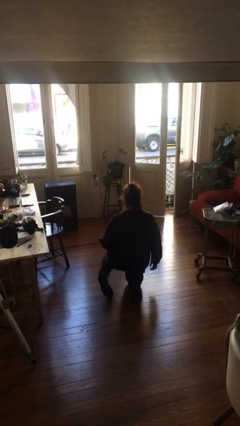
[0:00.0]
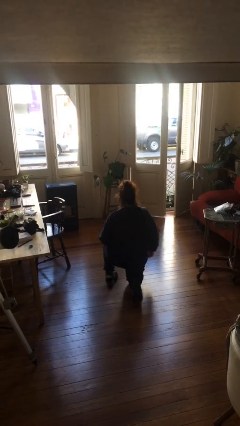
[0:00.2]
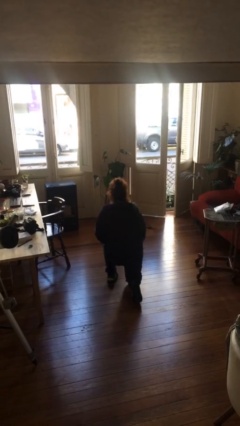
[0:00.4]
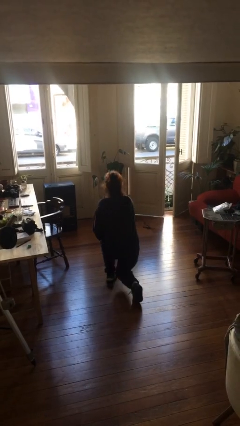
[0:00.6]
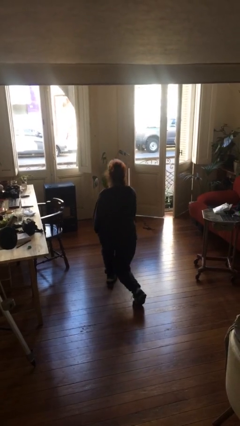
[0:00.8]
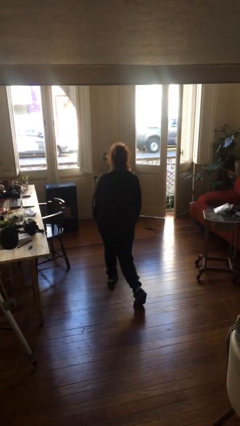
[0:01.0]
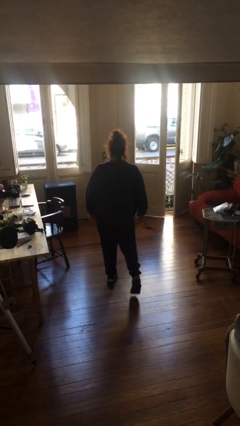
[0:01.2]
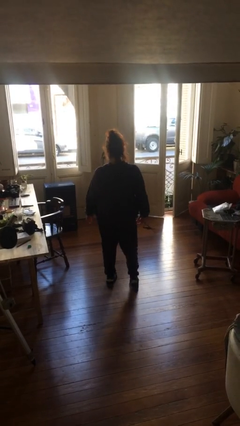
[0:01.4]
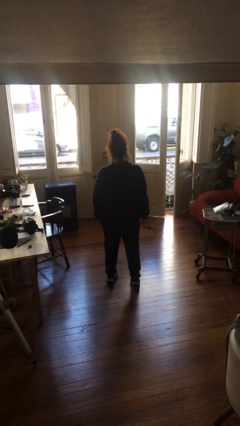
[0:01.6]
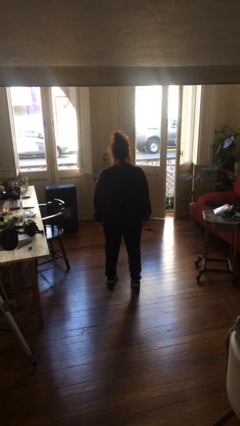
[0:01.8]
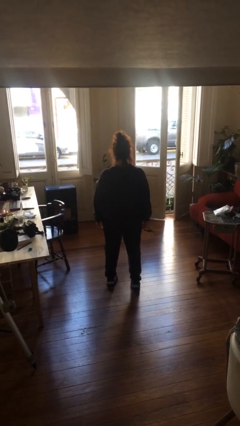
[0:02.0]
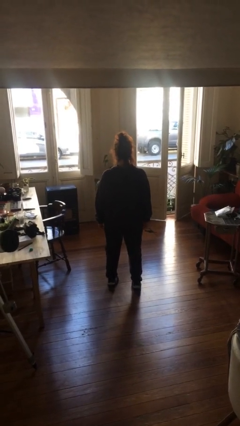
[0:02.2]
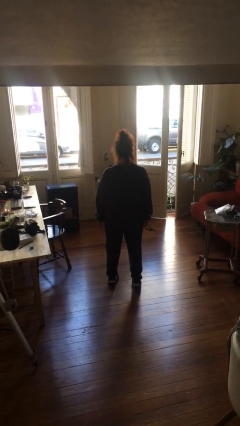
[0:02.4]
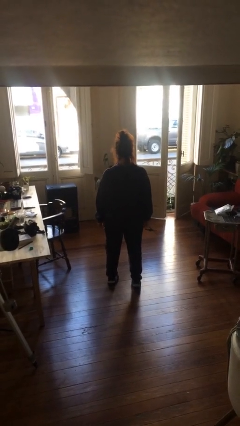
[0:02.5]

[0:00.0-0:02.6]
person stands up from floor

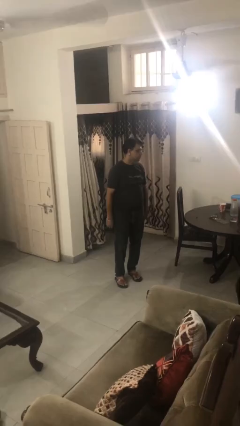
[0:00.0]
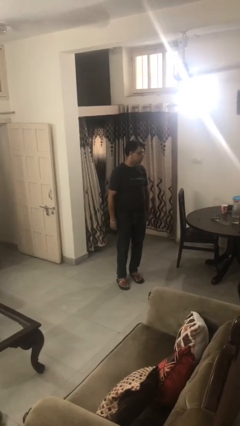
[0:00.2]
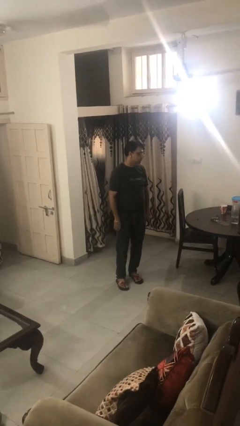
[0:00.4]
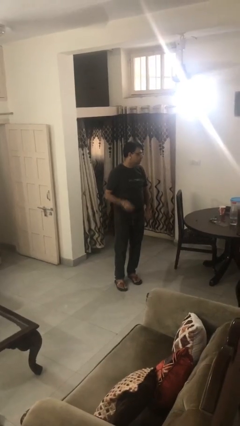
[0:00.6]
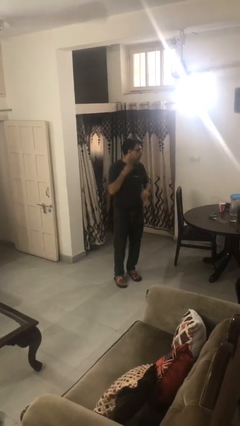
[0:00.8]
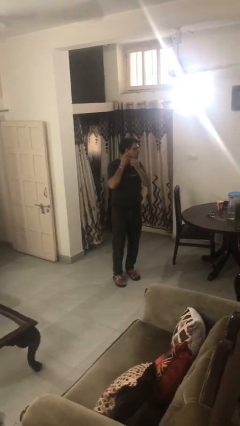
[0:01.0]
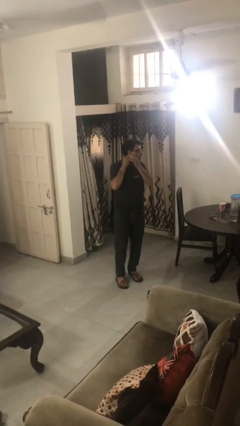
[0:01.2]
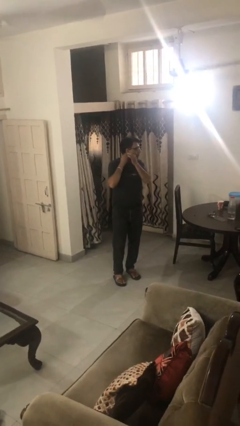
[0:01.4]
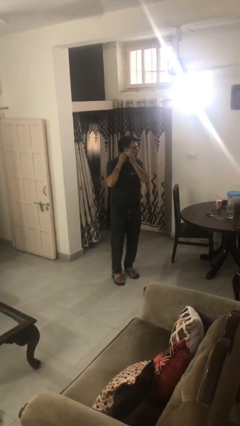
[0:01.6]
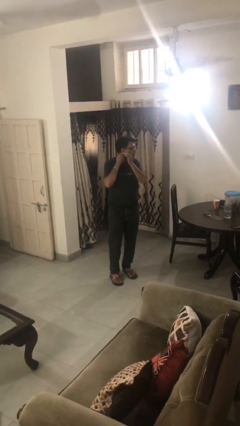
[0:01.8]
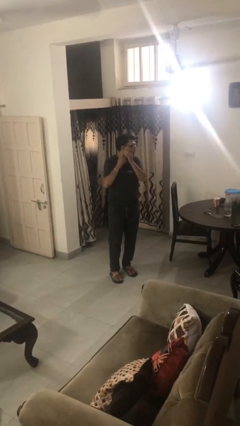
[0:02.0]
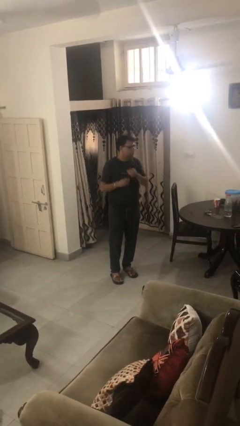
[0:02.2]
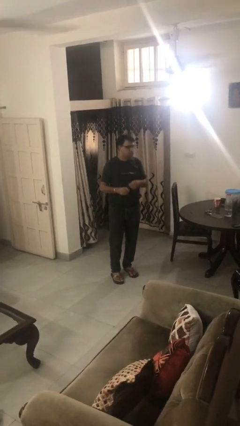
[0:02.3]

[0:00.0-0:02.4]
person takes off earrings

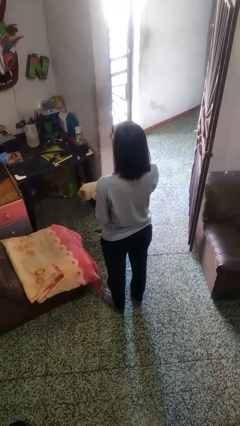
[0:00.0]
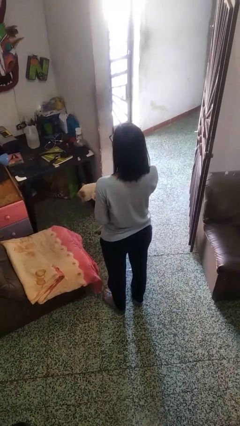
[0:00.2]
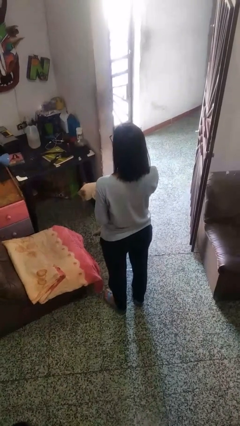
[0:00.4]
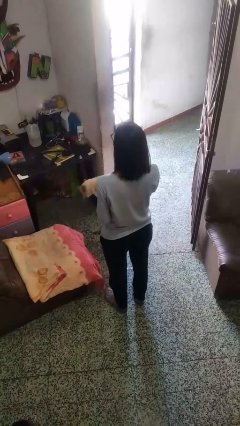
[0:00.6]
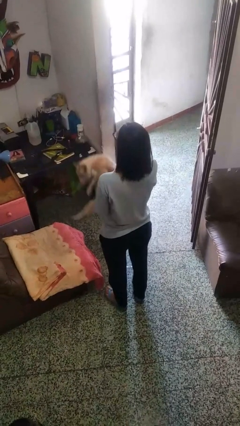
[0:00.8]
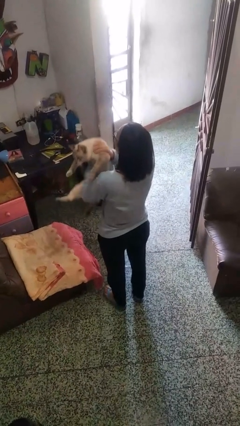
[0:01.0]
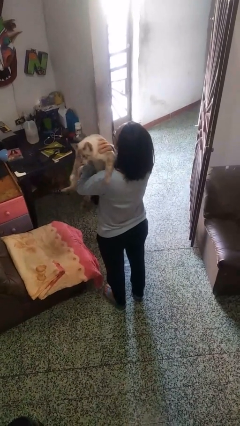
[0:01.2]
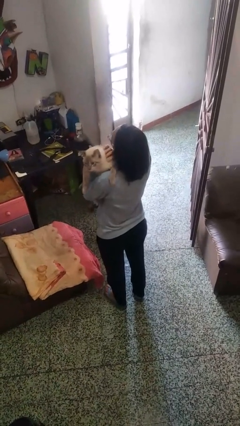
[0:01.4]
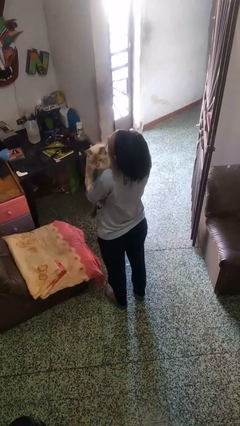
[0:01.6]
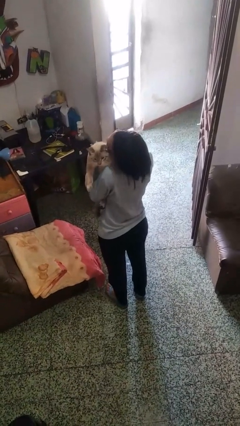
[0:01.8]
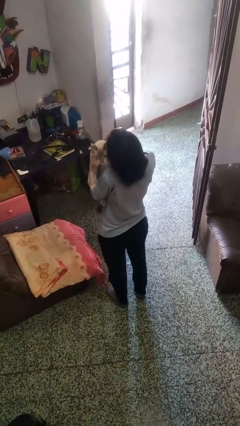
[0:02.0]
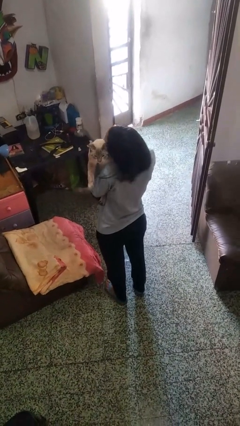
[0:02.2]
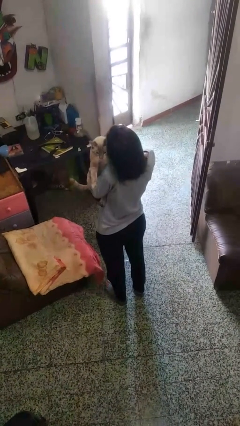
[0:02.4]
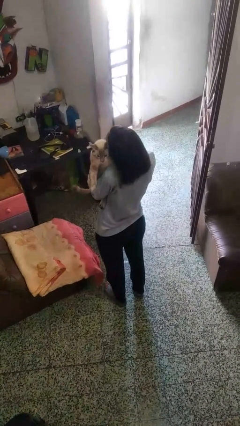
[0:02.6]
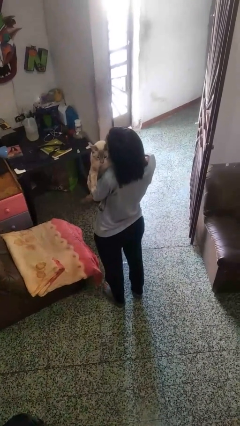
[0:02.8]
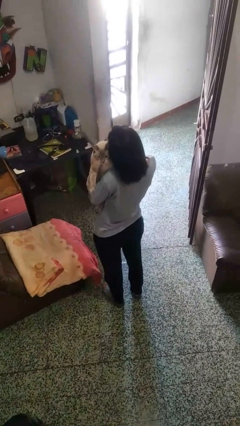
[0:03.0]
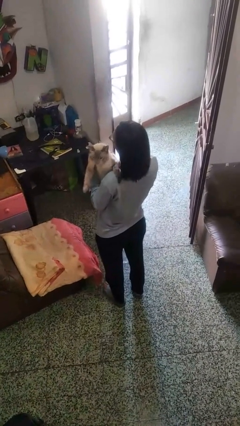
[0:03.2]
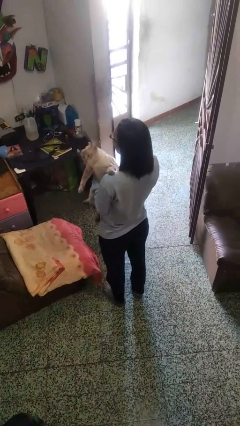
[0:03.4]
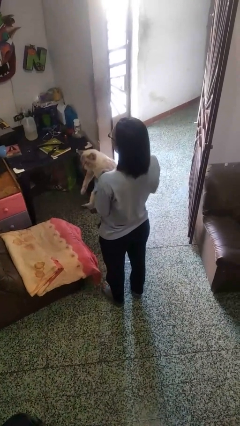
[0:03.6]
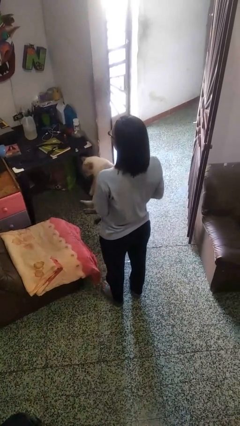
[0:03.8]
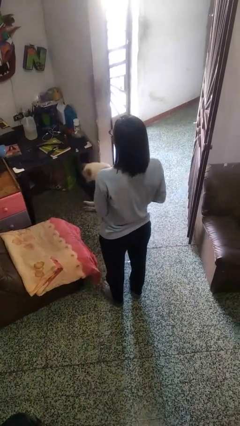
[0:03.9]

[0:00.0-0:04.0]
person hugs cat

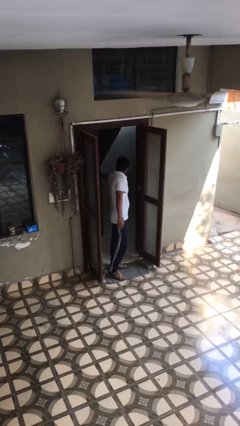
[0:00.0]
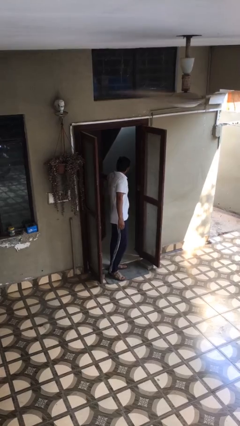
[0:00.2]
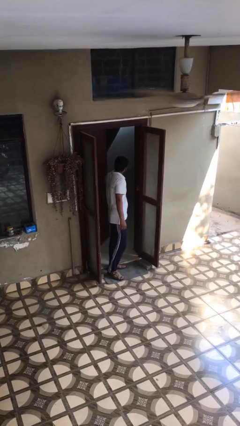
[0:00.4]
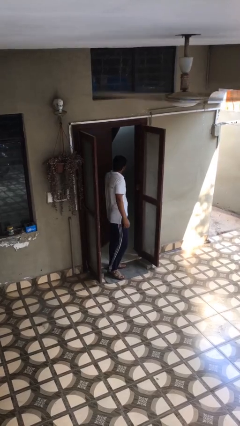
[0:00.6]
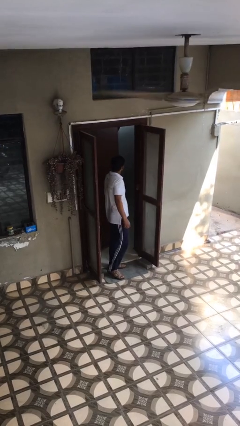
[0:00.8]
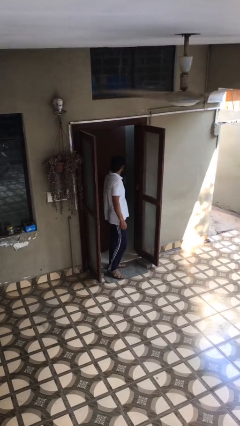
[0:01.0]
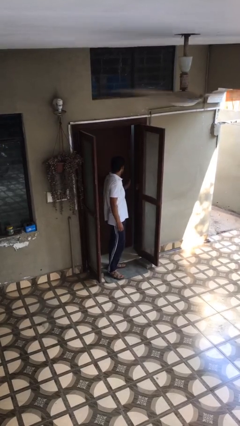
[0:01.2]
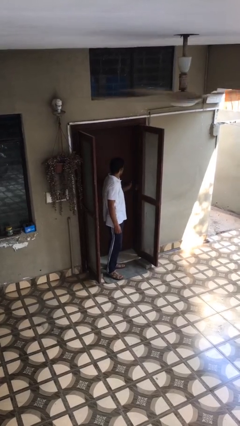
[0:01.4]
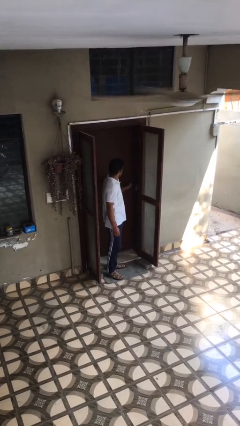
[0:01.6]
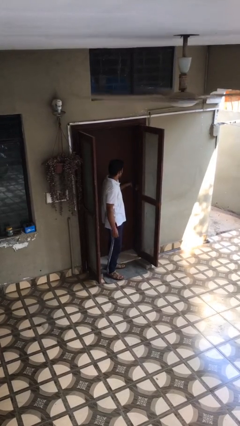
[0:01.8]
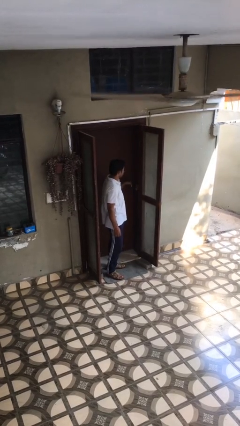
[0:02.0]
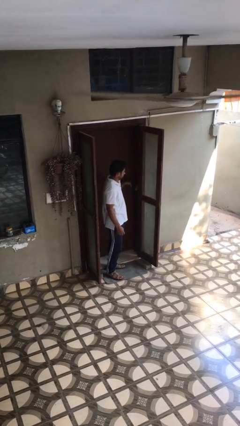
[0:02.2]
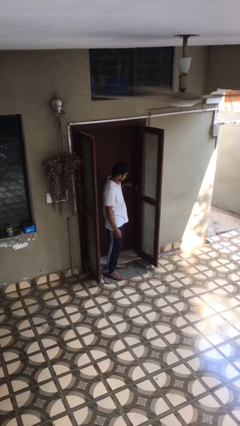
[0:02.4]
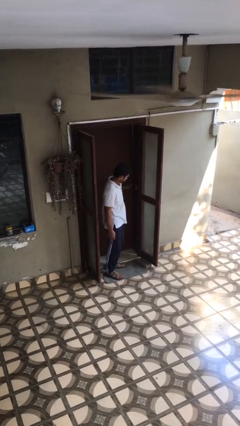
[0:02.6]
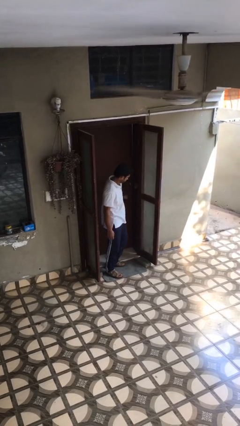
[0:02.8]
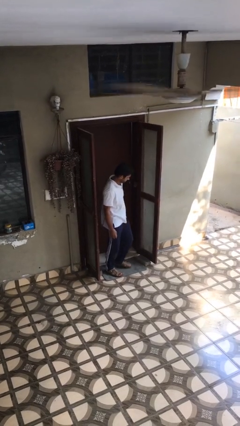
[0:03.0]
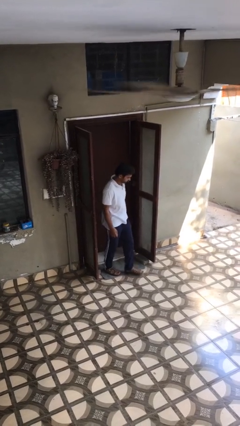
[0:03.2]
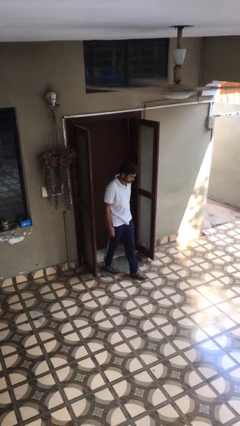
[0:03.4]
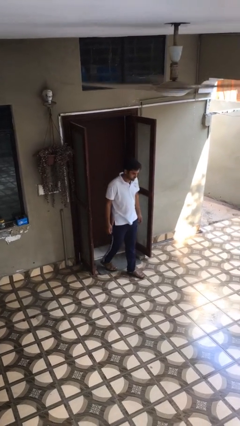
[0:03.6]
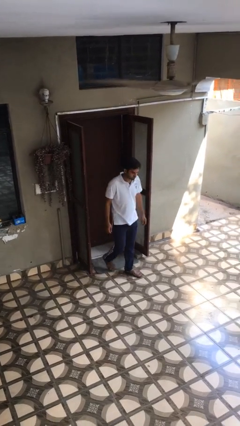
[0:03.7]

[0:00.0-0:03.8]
person closes facility door

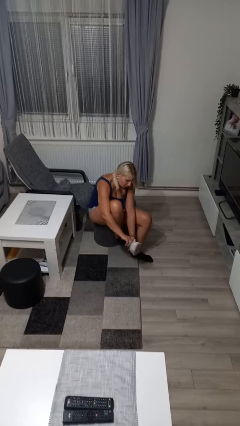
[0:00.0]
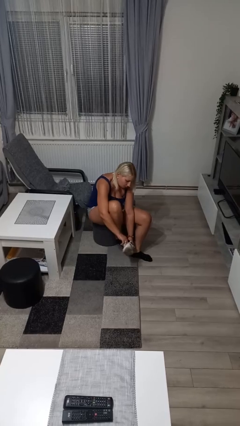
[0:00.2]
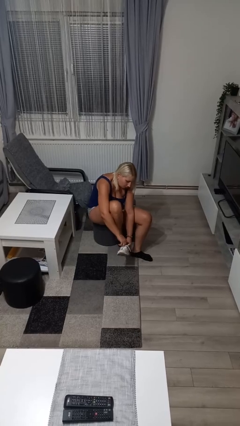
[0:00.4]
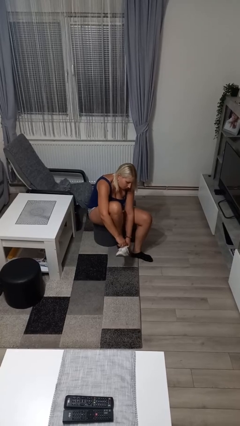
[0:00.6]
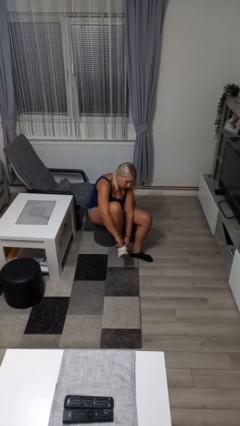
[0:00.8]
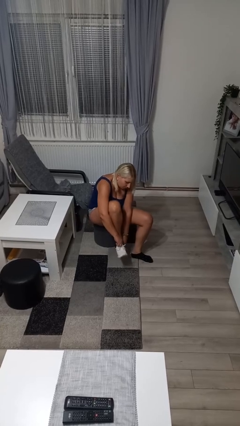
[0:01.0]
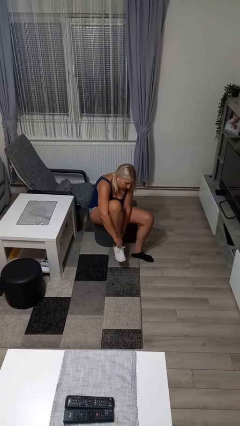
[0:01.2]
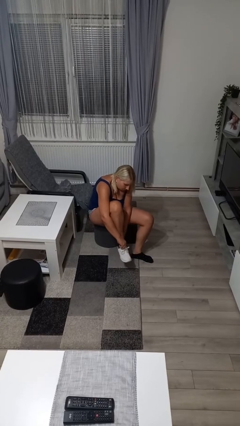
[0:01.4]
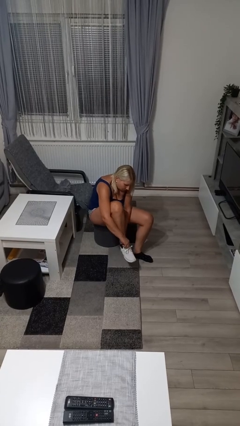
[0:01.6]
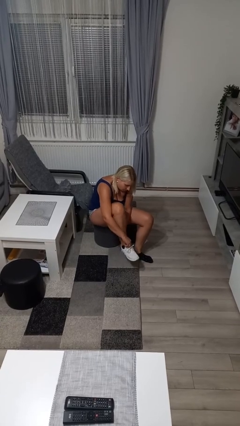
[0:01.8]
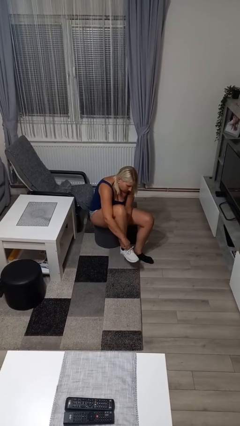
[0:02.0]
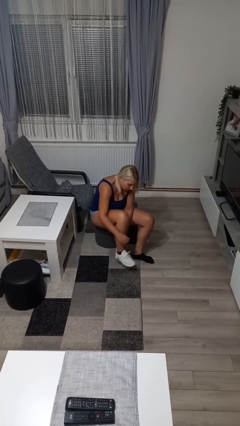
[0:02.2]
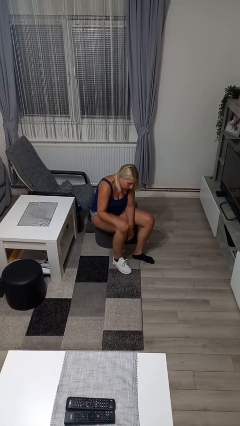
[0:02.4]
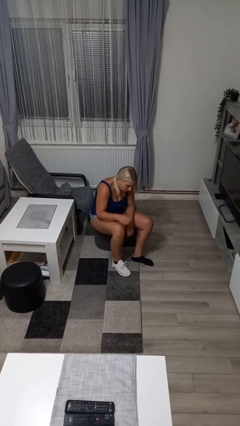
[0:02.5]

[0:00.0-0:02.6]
person puts on shoes

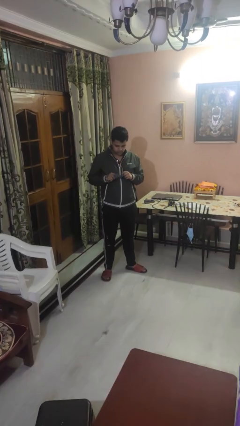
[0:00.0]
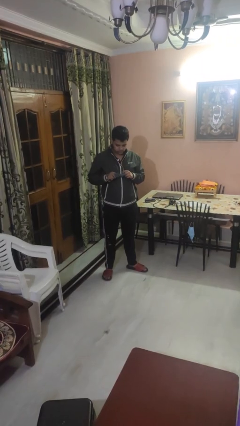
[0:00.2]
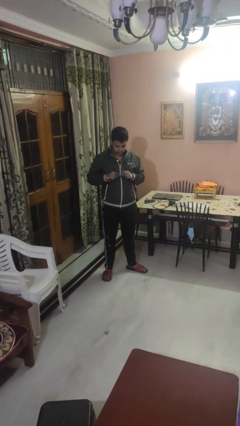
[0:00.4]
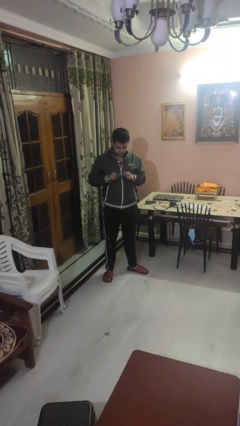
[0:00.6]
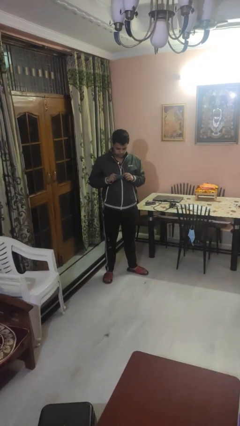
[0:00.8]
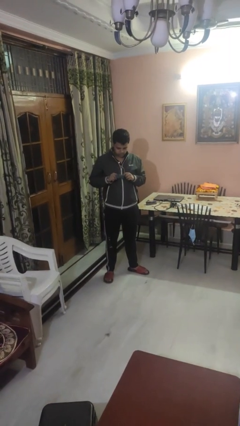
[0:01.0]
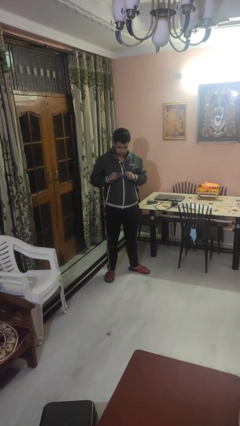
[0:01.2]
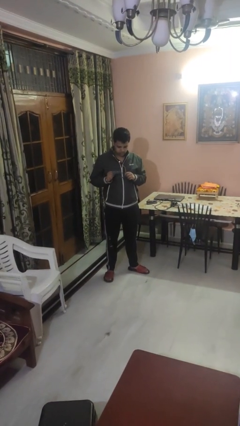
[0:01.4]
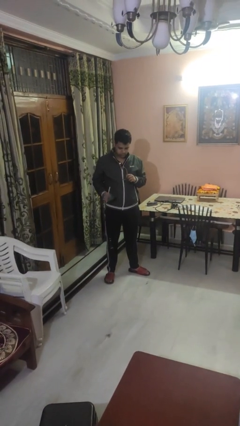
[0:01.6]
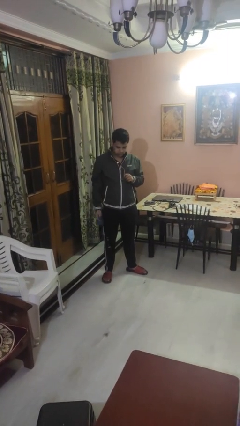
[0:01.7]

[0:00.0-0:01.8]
person cleans eyeglasses
